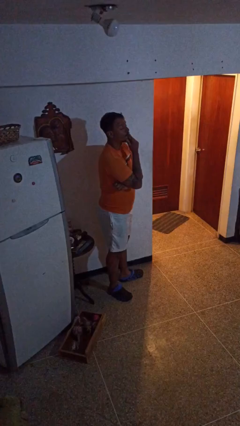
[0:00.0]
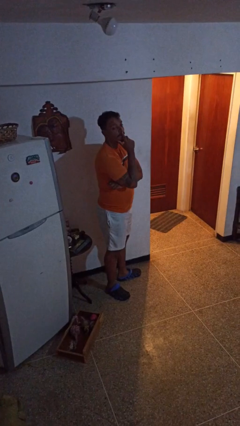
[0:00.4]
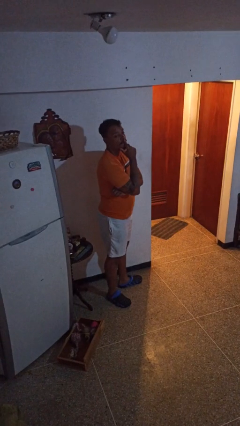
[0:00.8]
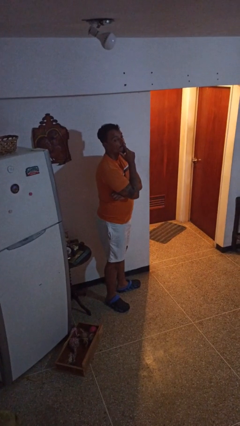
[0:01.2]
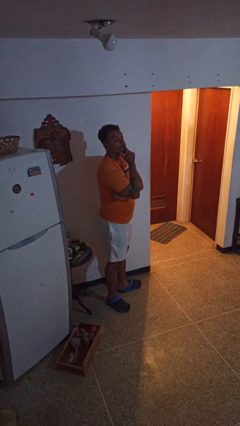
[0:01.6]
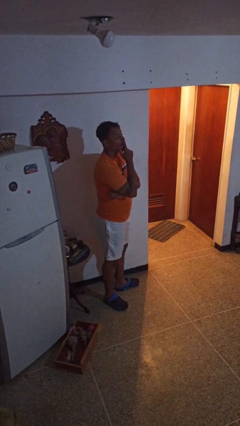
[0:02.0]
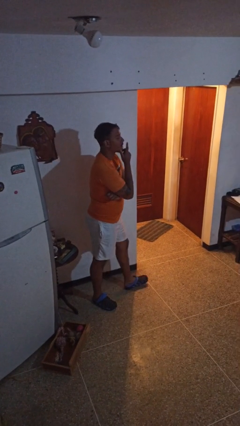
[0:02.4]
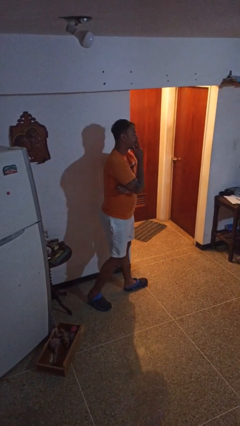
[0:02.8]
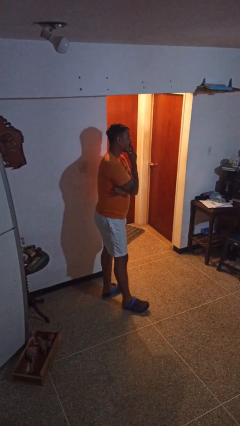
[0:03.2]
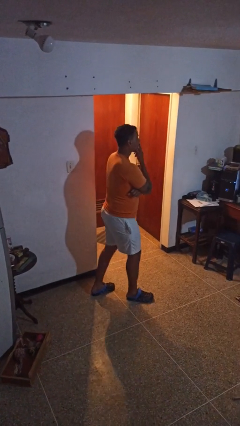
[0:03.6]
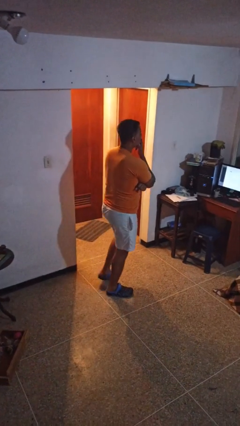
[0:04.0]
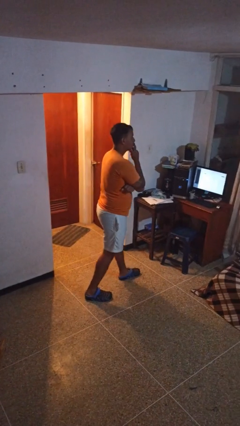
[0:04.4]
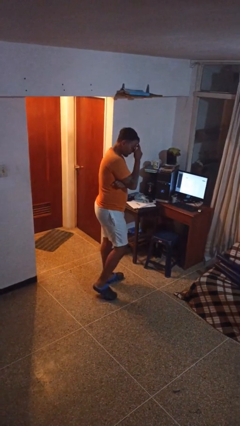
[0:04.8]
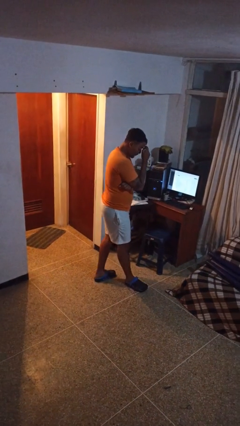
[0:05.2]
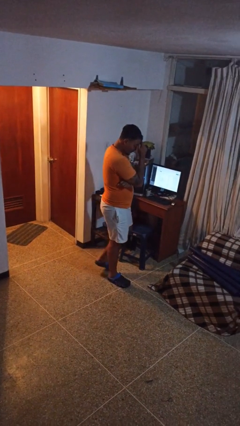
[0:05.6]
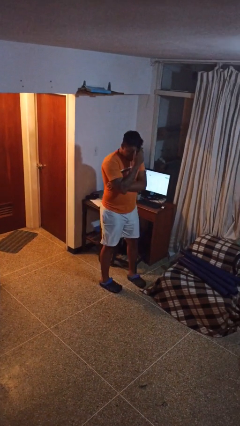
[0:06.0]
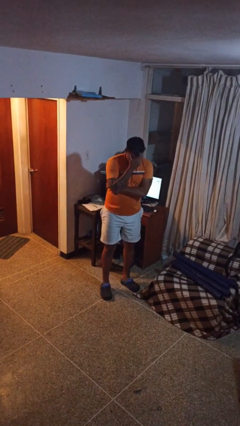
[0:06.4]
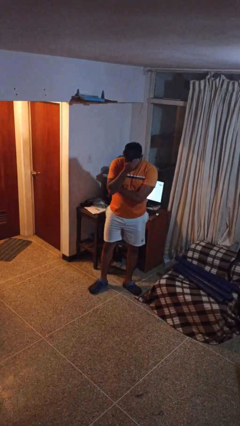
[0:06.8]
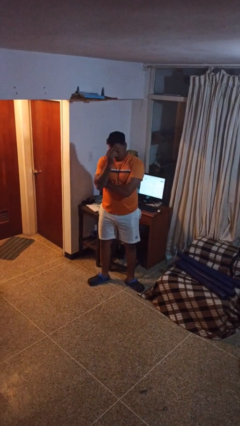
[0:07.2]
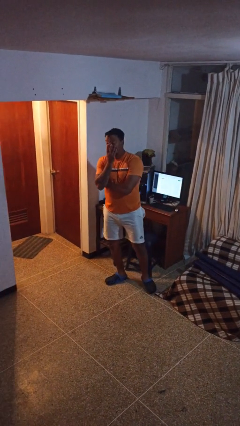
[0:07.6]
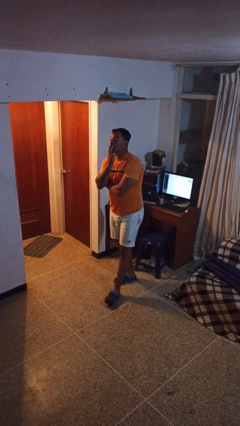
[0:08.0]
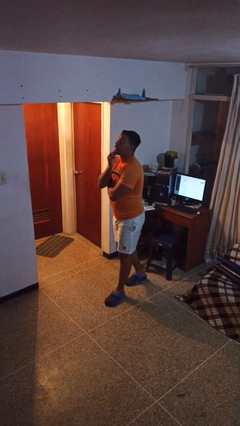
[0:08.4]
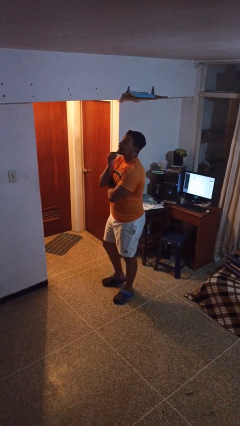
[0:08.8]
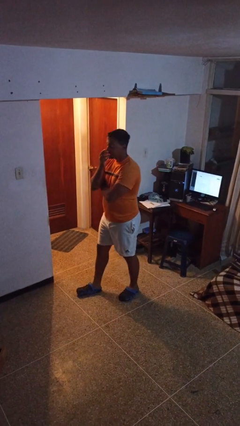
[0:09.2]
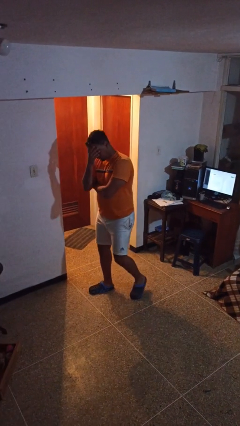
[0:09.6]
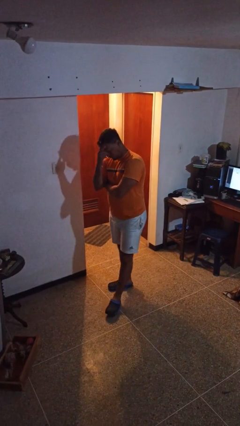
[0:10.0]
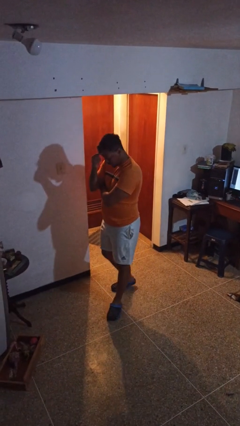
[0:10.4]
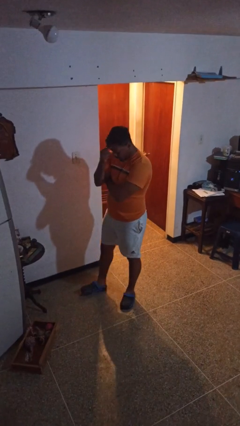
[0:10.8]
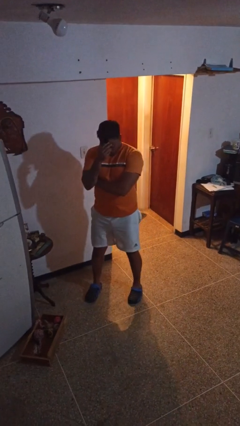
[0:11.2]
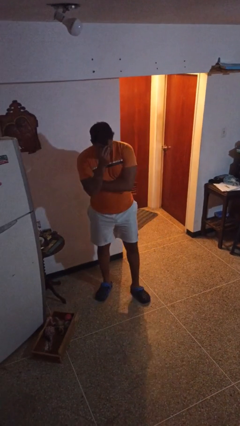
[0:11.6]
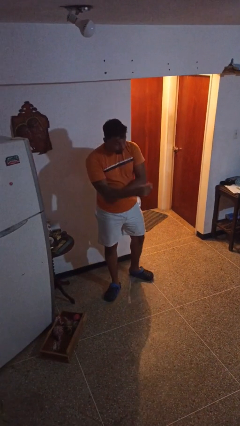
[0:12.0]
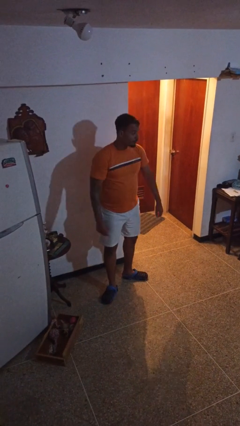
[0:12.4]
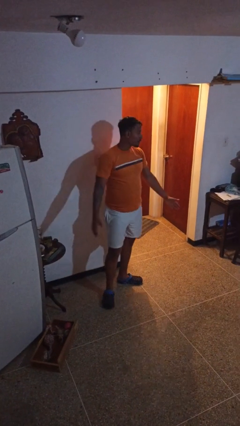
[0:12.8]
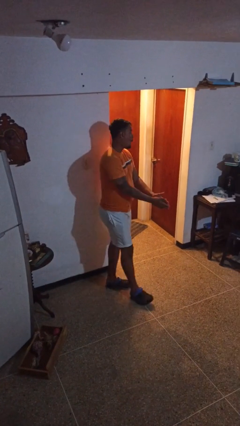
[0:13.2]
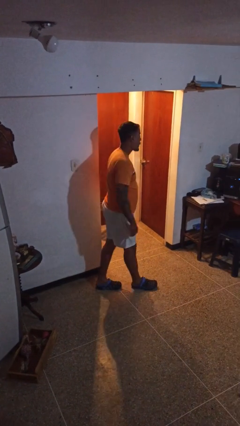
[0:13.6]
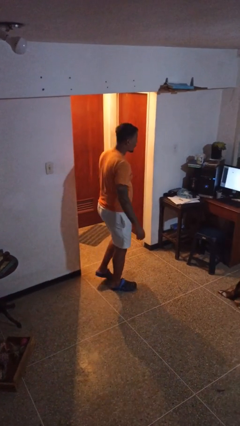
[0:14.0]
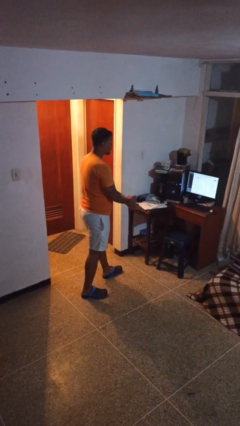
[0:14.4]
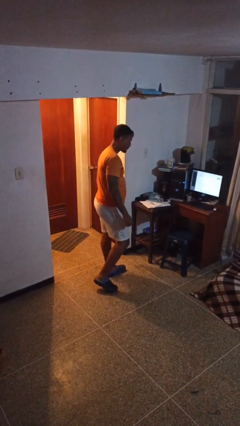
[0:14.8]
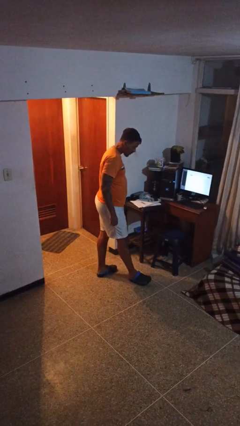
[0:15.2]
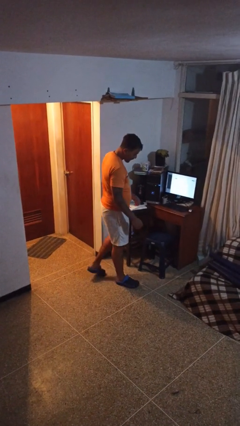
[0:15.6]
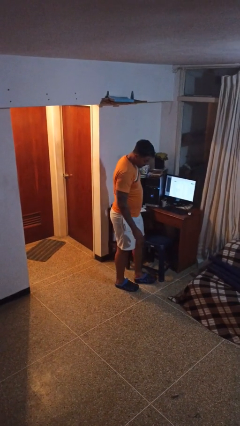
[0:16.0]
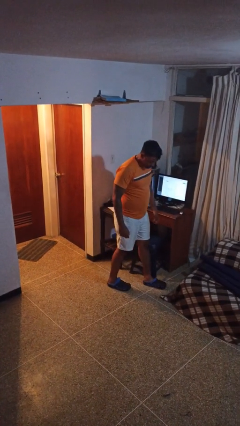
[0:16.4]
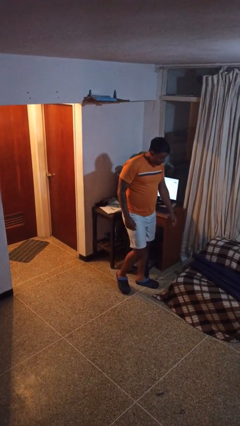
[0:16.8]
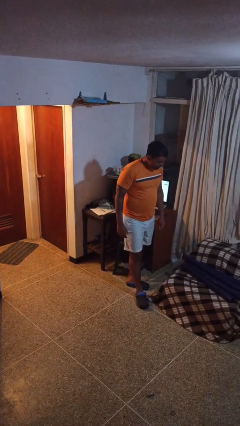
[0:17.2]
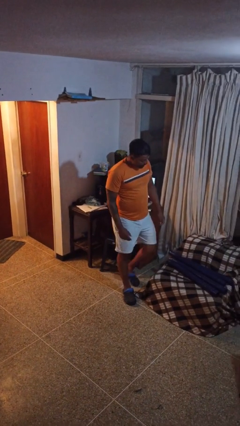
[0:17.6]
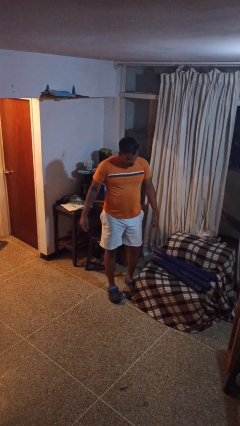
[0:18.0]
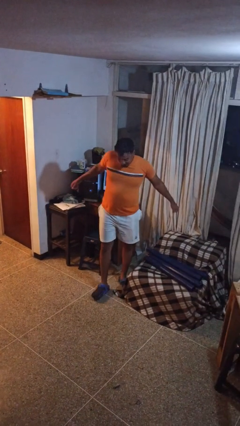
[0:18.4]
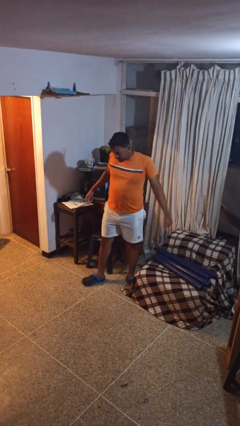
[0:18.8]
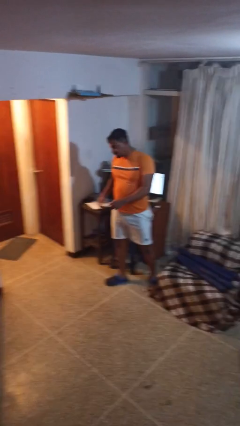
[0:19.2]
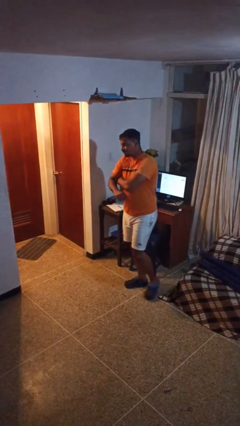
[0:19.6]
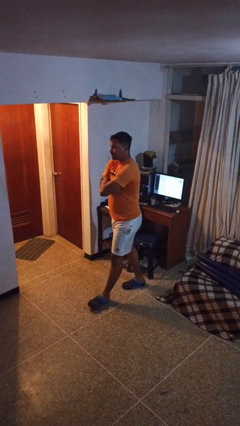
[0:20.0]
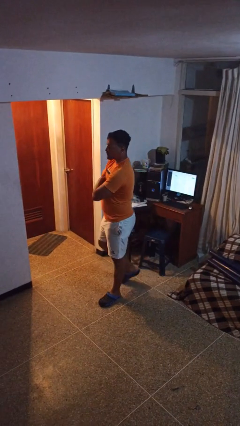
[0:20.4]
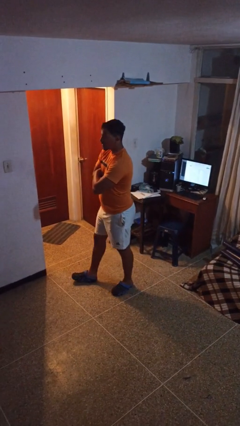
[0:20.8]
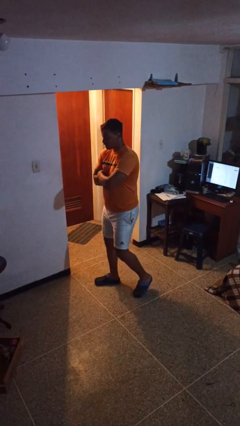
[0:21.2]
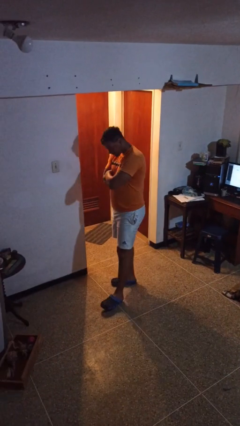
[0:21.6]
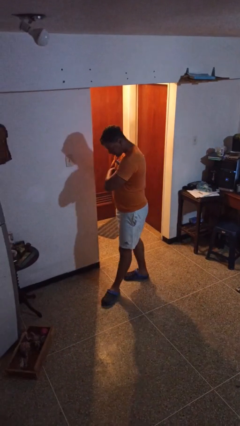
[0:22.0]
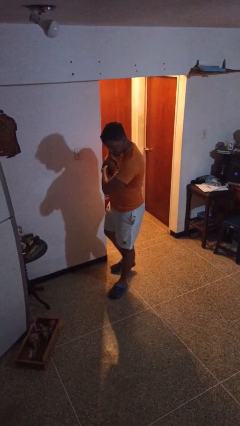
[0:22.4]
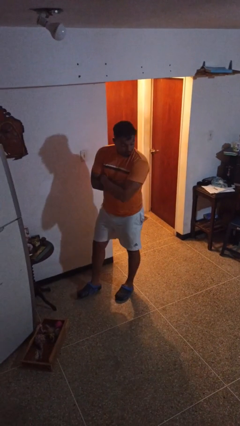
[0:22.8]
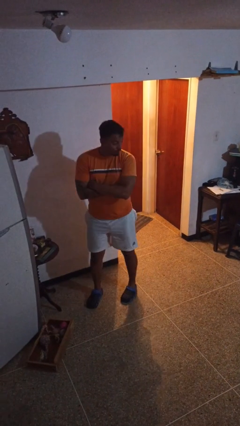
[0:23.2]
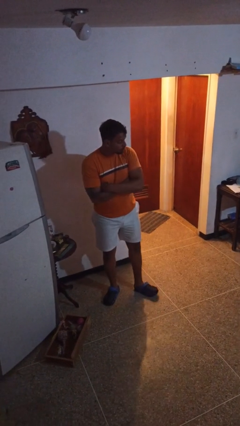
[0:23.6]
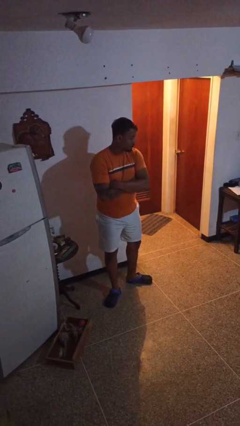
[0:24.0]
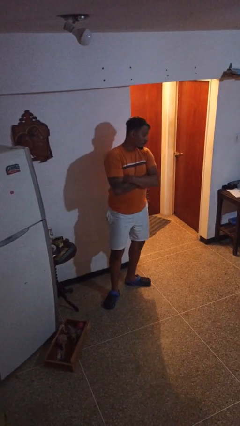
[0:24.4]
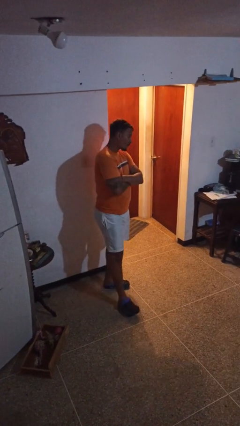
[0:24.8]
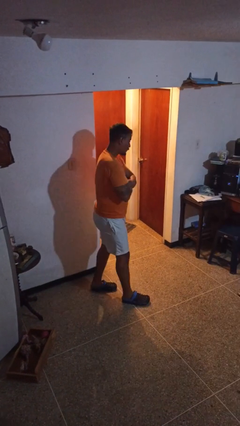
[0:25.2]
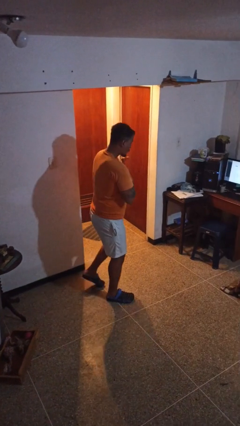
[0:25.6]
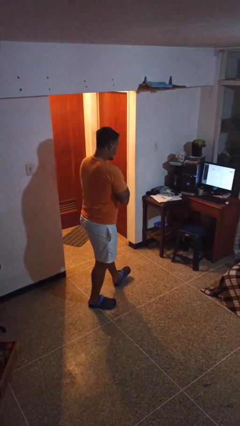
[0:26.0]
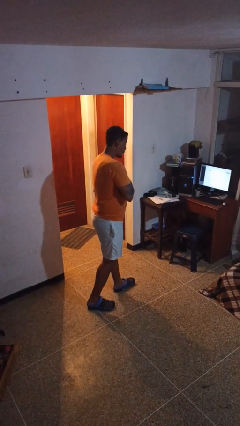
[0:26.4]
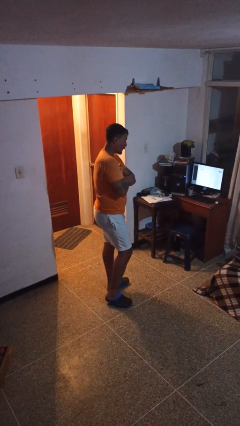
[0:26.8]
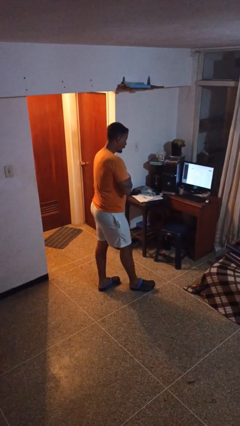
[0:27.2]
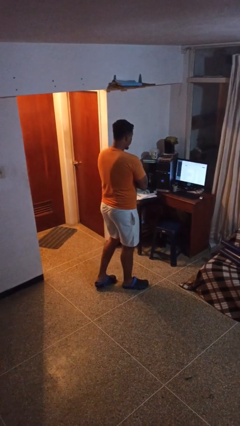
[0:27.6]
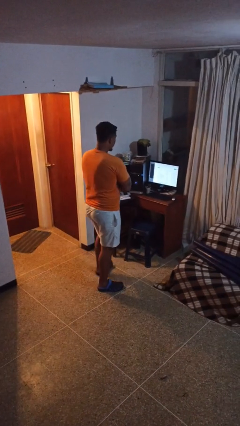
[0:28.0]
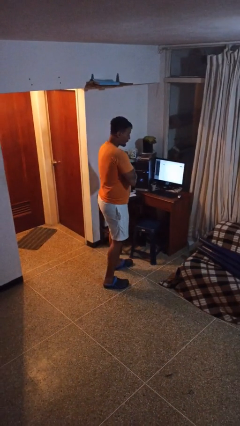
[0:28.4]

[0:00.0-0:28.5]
person walks

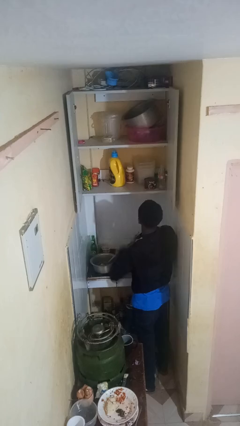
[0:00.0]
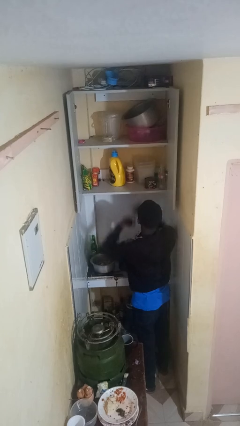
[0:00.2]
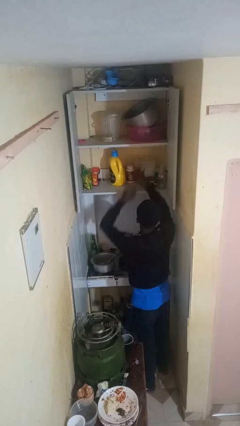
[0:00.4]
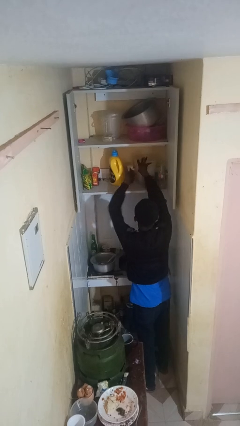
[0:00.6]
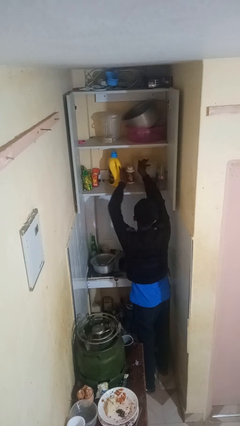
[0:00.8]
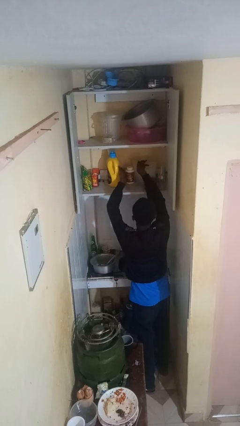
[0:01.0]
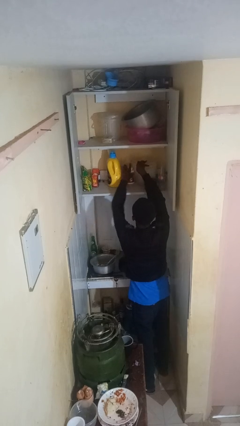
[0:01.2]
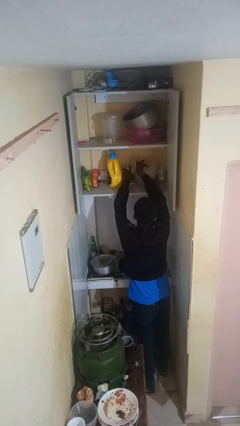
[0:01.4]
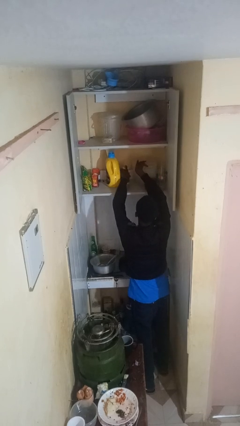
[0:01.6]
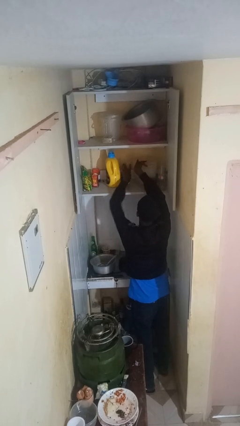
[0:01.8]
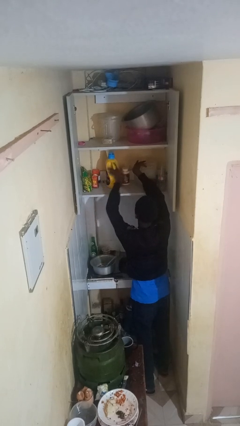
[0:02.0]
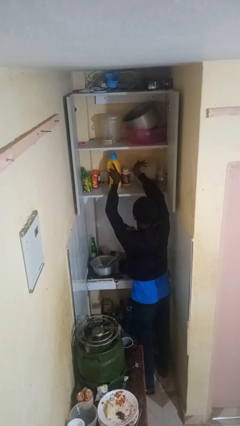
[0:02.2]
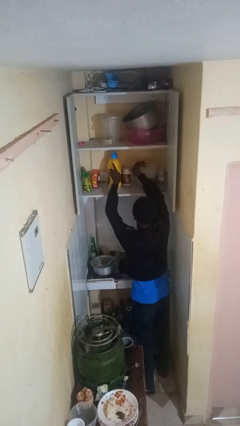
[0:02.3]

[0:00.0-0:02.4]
person searches in kitchen drawer

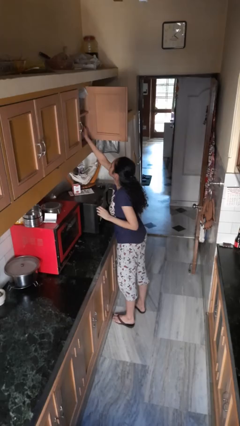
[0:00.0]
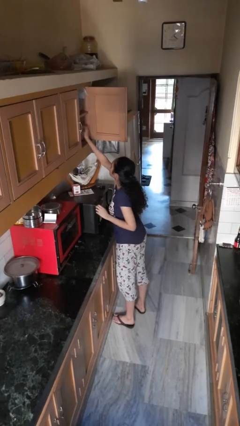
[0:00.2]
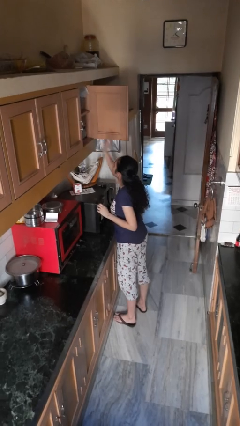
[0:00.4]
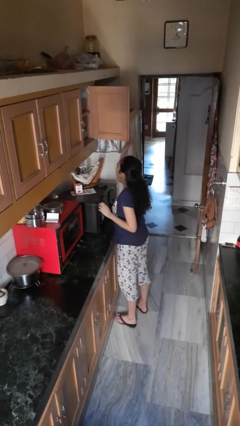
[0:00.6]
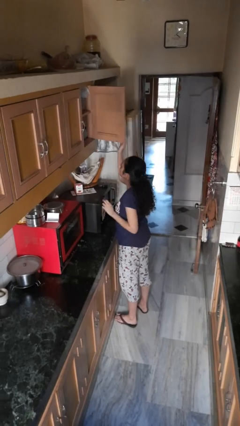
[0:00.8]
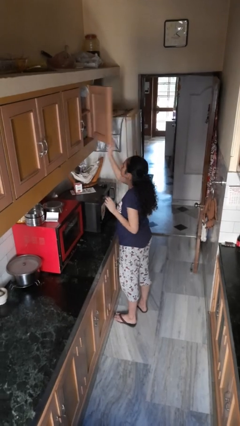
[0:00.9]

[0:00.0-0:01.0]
person puts object in cabinet

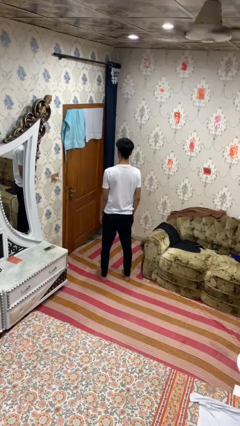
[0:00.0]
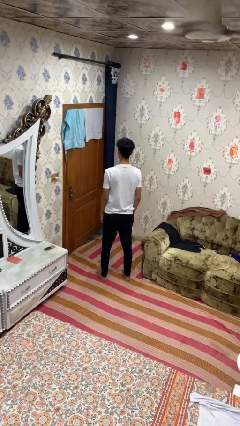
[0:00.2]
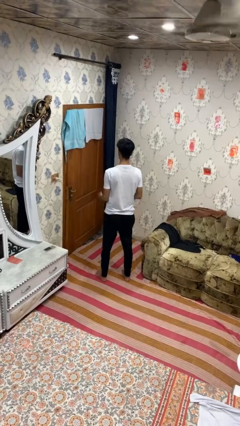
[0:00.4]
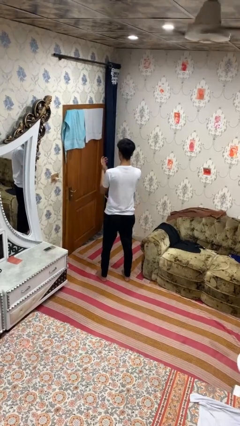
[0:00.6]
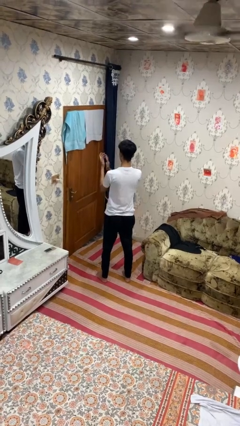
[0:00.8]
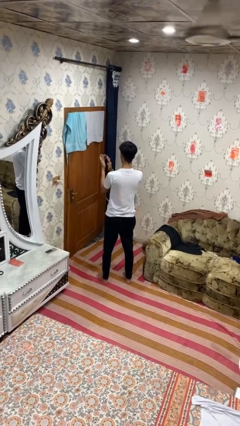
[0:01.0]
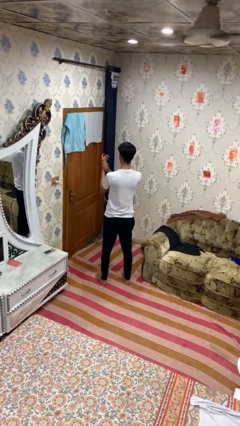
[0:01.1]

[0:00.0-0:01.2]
person claps hands
